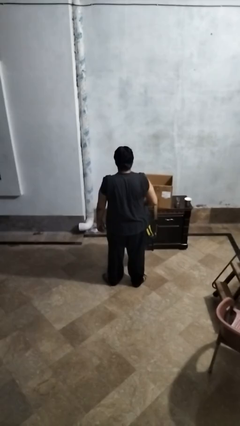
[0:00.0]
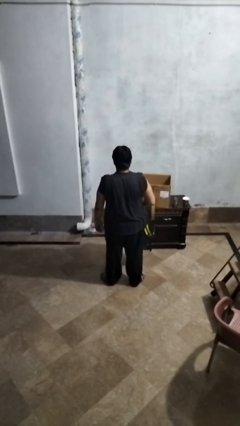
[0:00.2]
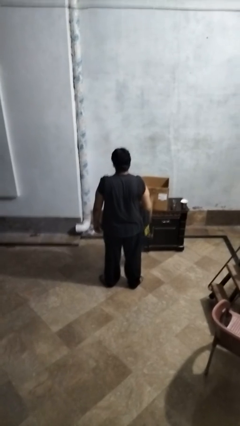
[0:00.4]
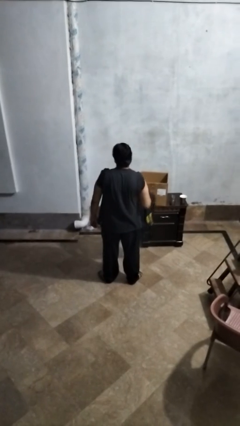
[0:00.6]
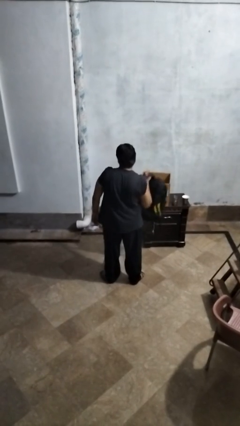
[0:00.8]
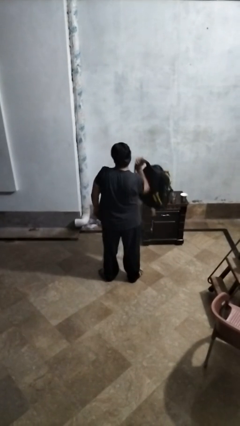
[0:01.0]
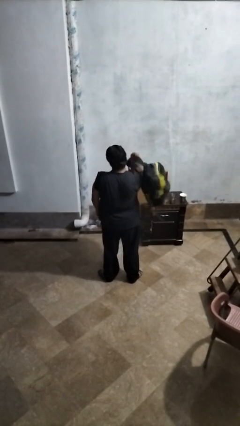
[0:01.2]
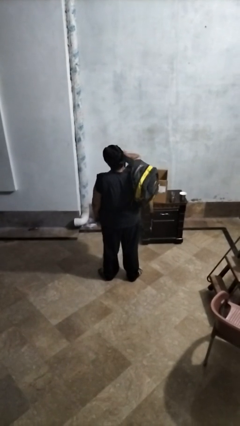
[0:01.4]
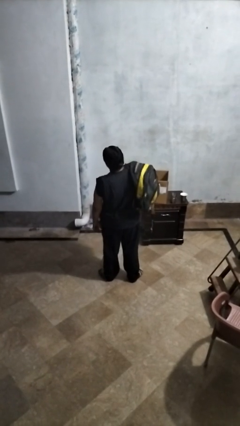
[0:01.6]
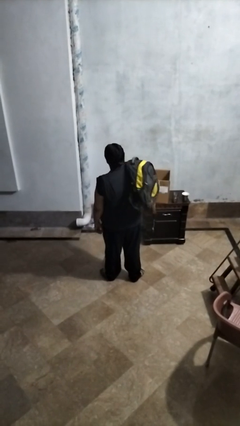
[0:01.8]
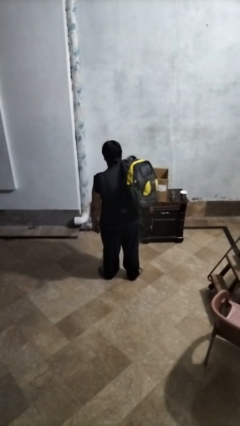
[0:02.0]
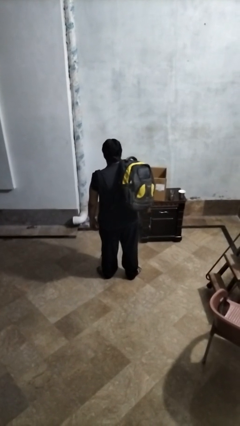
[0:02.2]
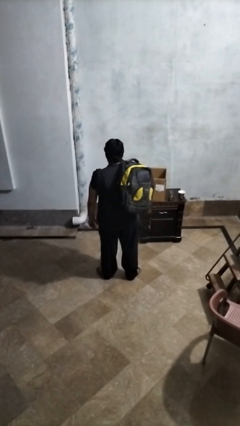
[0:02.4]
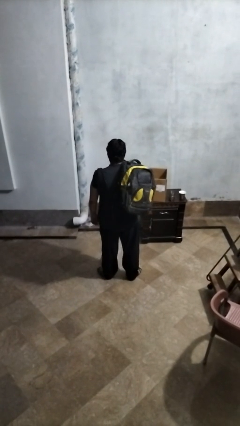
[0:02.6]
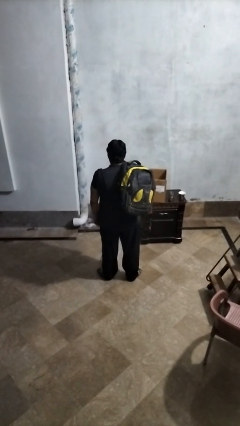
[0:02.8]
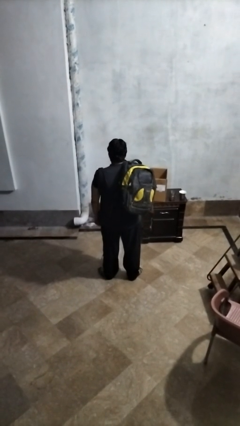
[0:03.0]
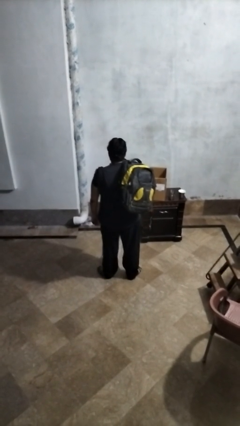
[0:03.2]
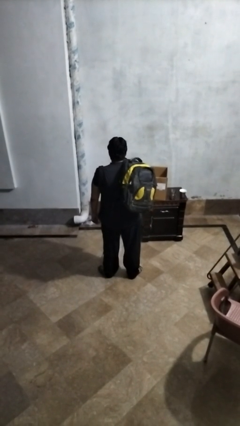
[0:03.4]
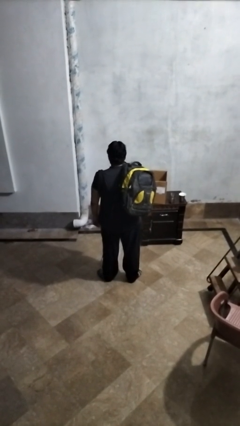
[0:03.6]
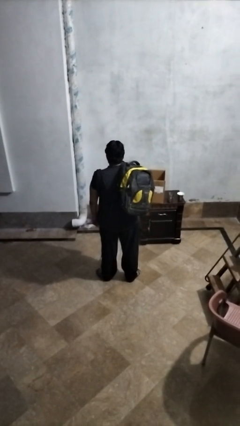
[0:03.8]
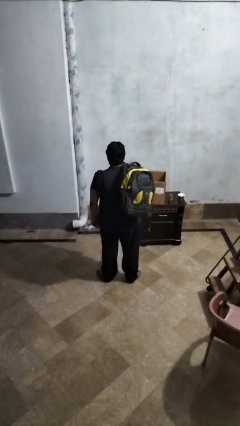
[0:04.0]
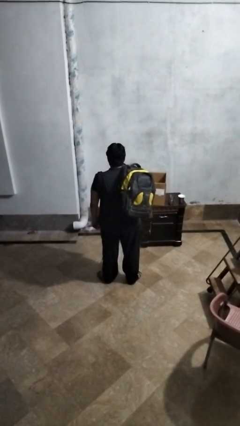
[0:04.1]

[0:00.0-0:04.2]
person puts on backpack

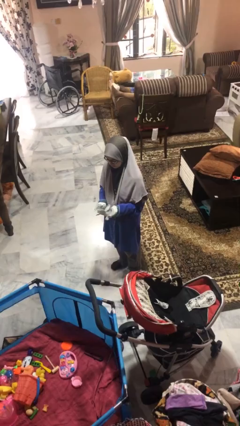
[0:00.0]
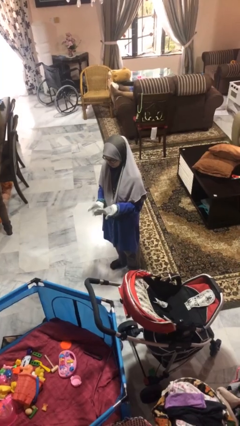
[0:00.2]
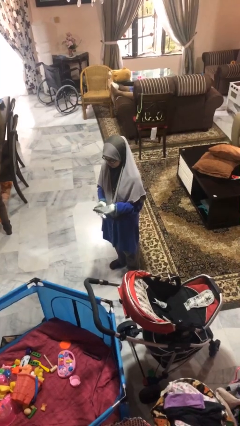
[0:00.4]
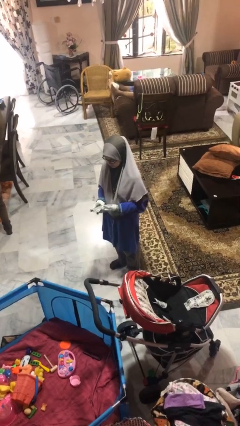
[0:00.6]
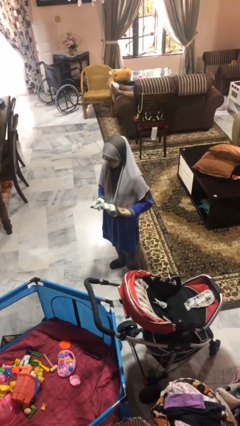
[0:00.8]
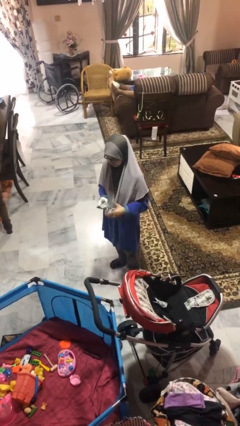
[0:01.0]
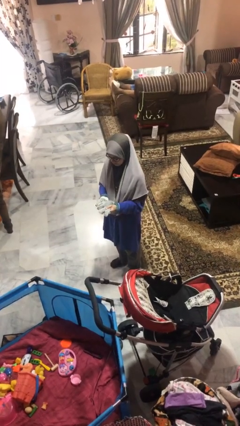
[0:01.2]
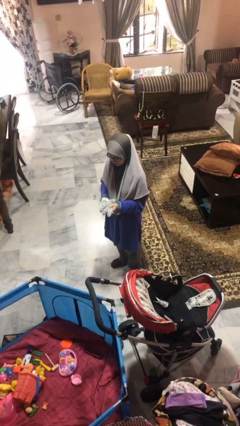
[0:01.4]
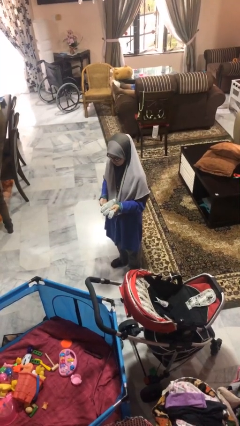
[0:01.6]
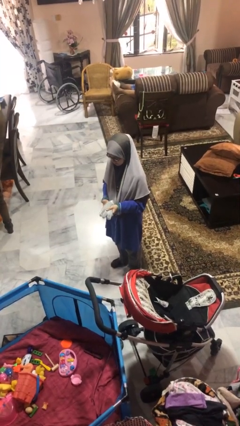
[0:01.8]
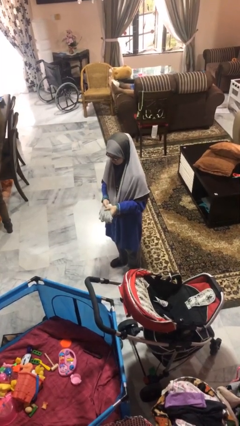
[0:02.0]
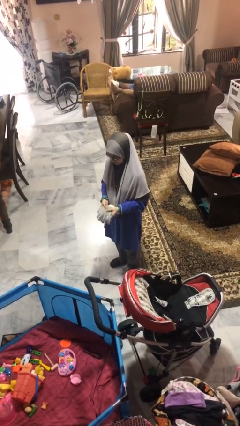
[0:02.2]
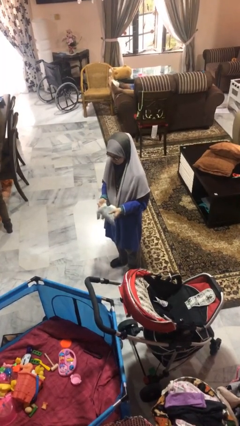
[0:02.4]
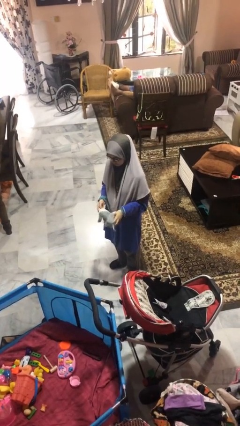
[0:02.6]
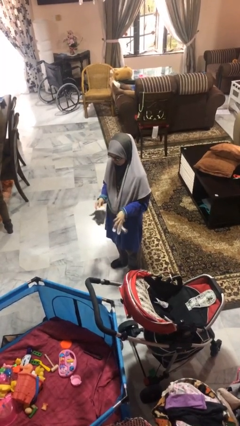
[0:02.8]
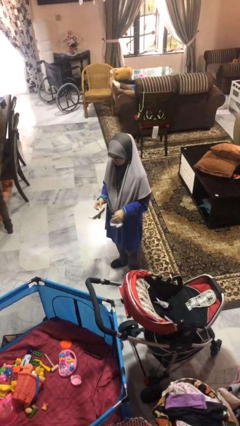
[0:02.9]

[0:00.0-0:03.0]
person takes off gloves

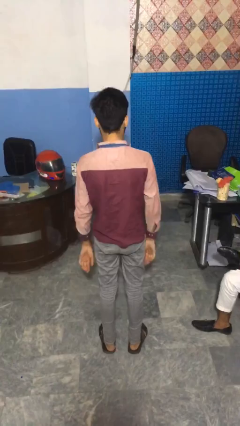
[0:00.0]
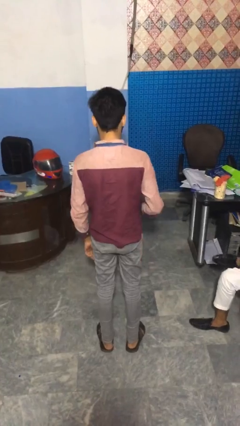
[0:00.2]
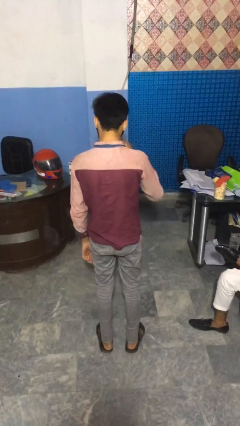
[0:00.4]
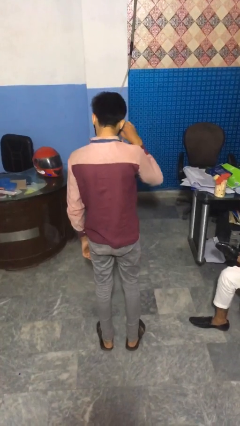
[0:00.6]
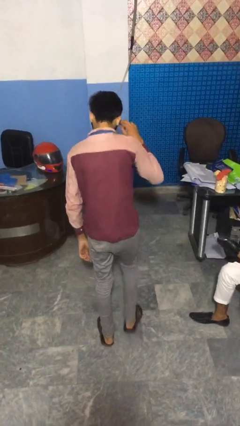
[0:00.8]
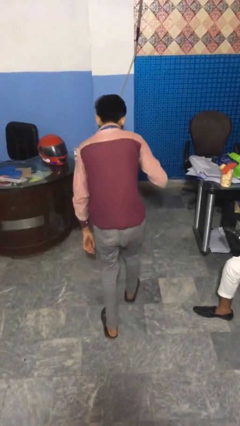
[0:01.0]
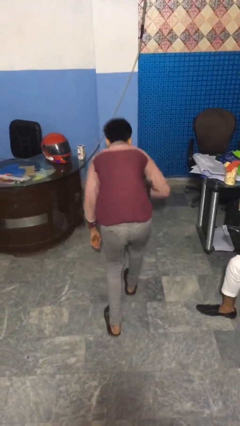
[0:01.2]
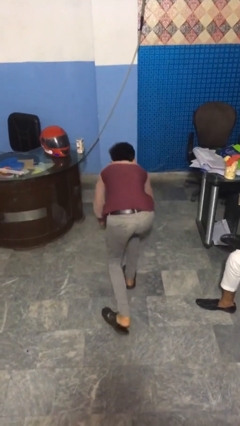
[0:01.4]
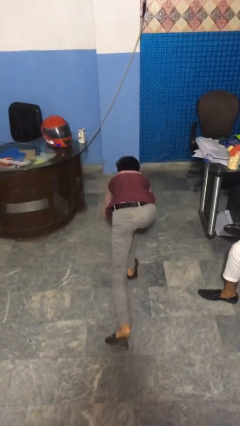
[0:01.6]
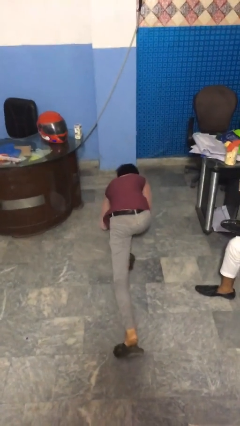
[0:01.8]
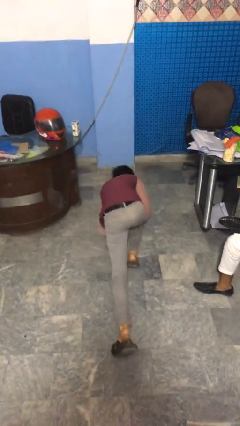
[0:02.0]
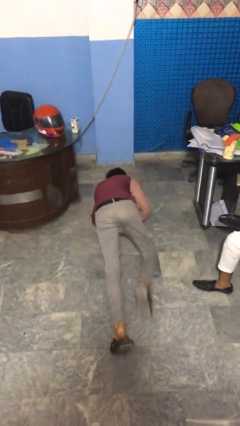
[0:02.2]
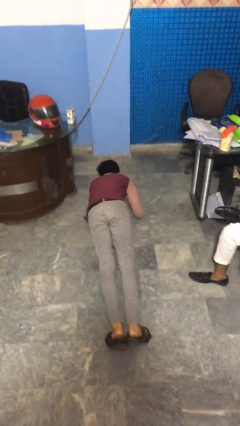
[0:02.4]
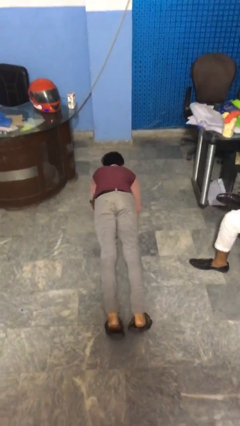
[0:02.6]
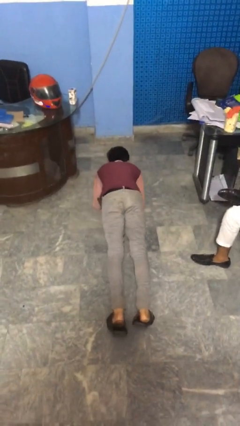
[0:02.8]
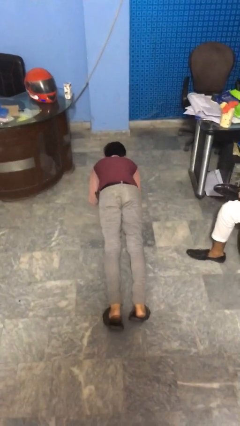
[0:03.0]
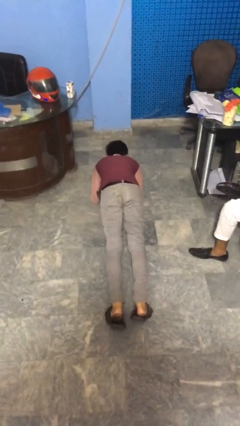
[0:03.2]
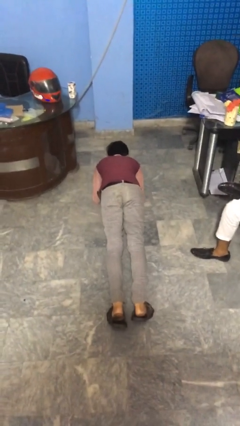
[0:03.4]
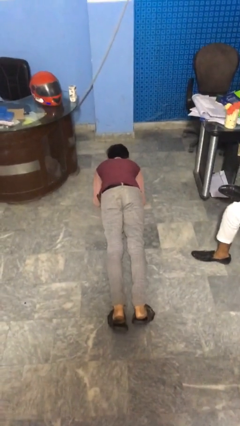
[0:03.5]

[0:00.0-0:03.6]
person exercises with plank

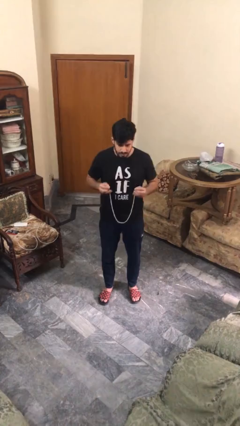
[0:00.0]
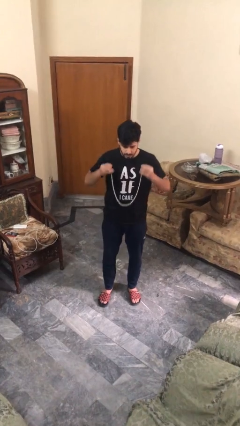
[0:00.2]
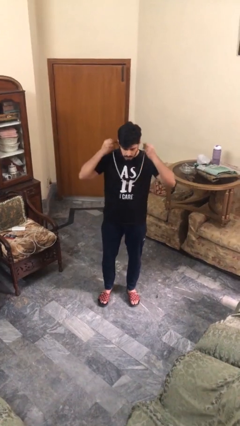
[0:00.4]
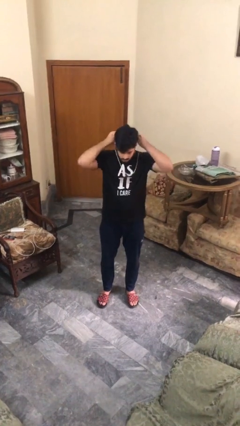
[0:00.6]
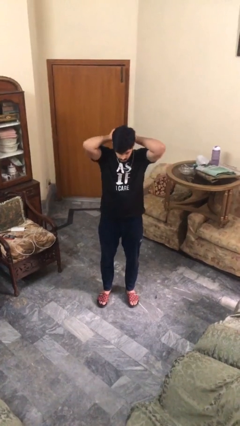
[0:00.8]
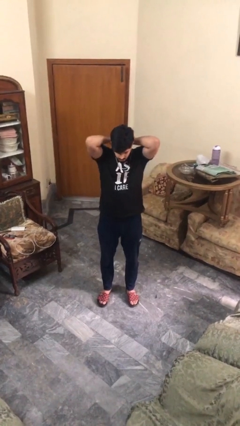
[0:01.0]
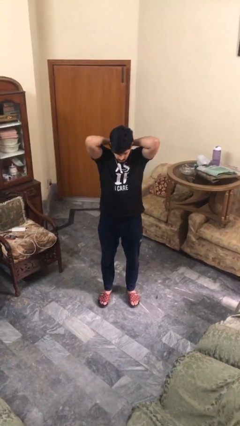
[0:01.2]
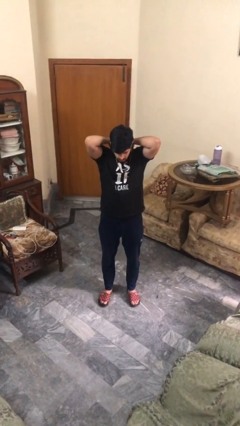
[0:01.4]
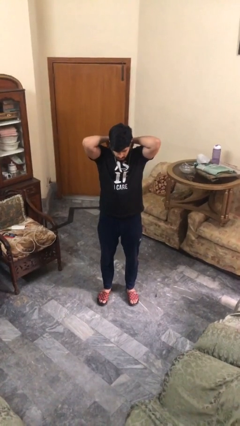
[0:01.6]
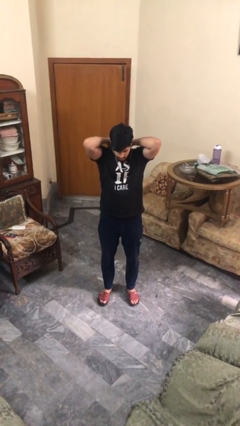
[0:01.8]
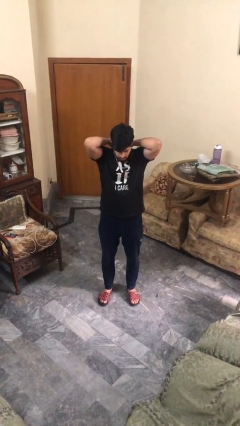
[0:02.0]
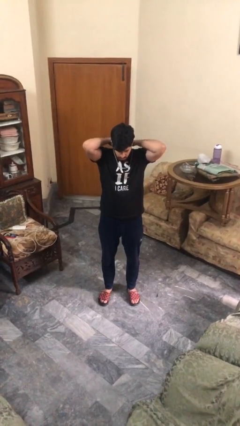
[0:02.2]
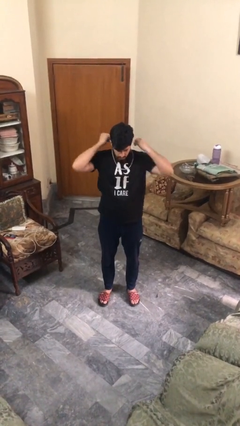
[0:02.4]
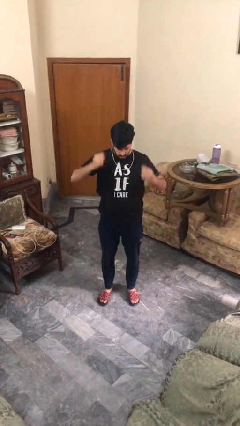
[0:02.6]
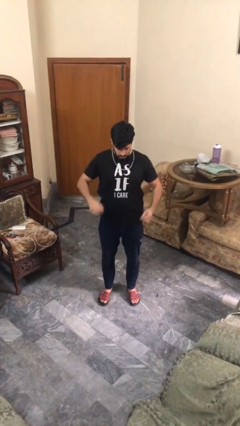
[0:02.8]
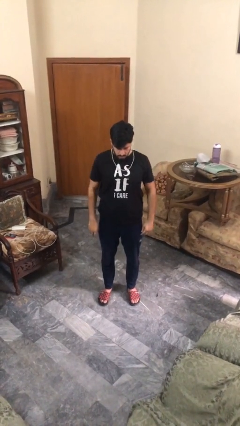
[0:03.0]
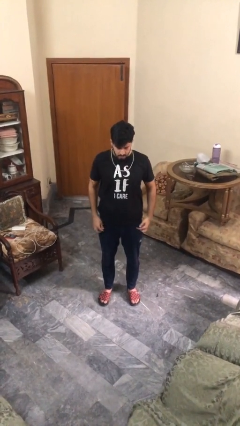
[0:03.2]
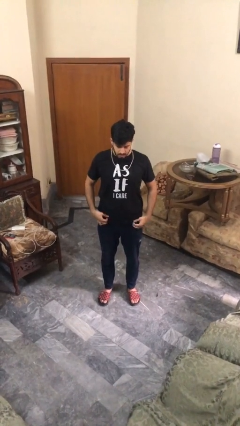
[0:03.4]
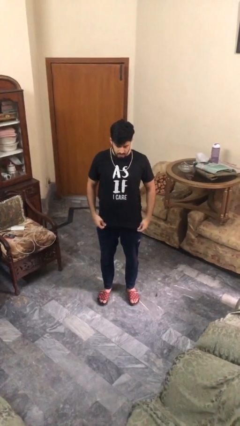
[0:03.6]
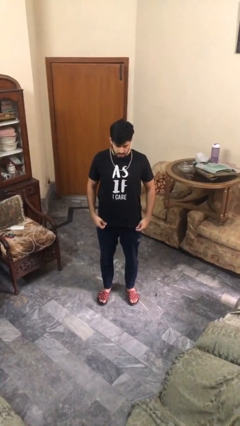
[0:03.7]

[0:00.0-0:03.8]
person puts on necklace

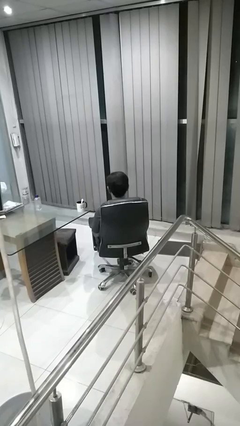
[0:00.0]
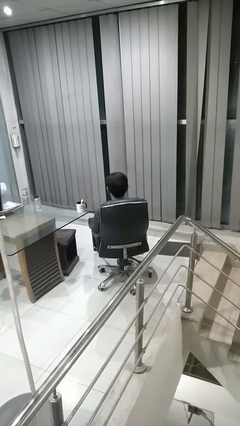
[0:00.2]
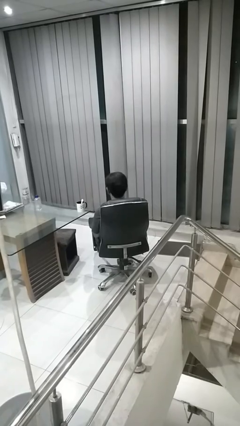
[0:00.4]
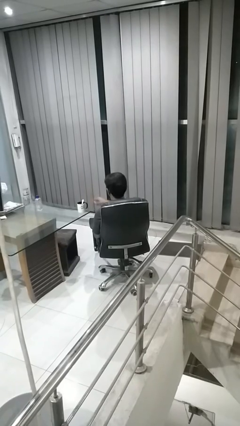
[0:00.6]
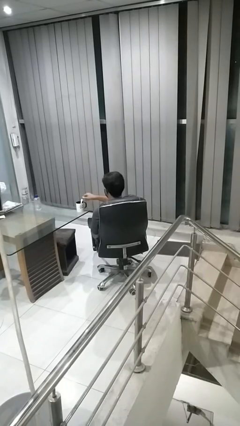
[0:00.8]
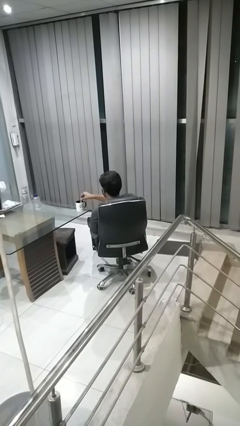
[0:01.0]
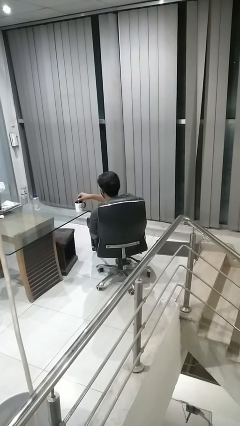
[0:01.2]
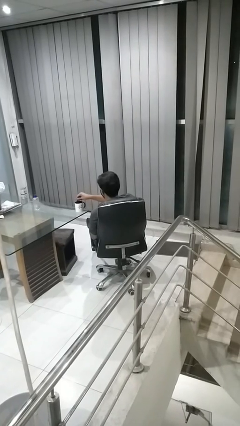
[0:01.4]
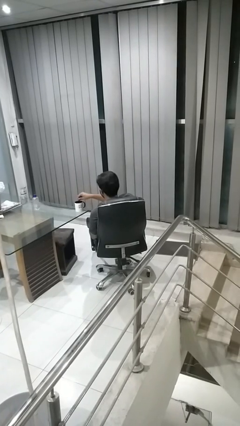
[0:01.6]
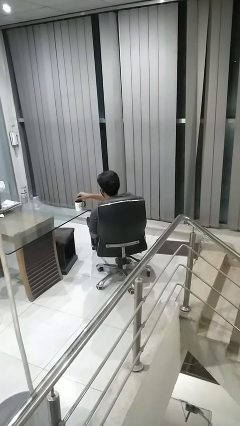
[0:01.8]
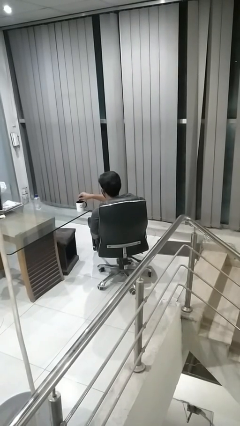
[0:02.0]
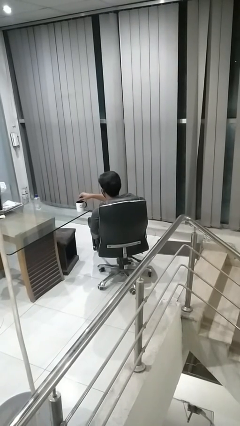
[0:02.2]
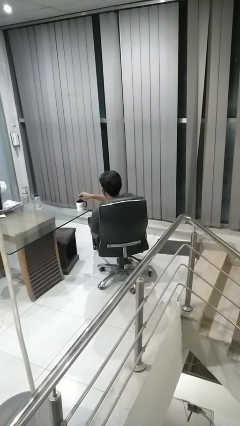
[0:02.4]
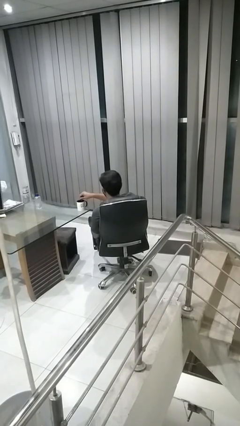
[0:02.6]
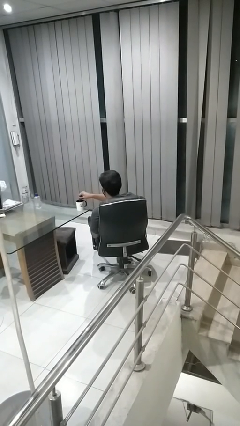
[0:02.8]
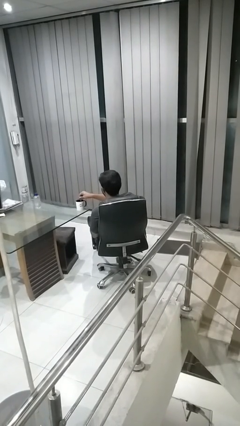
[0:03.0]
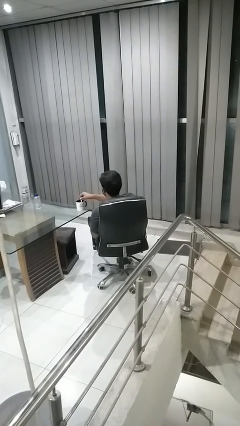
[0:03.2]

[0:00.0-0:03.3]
person stirs mug
